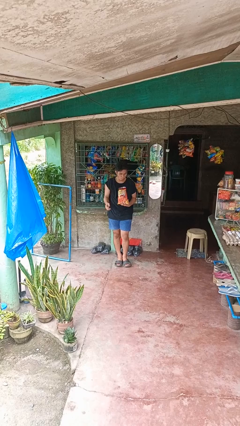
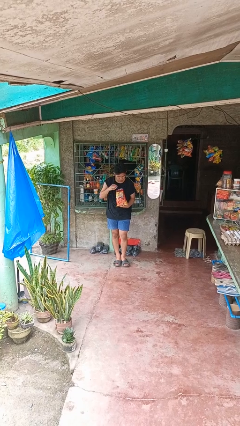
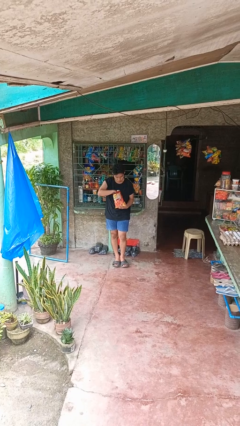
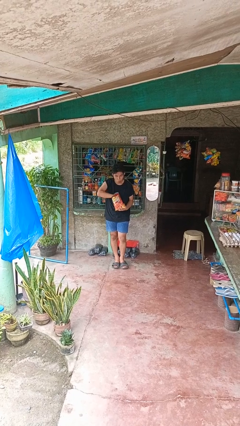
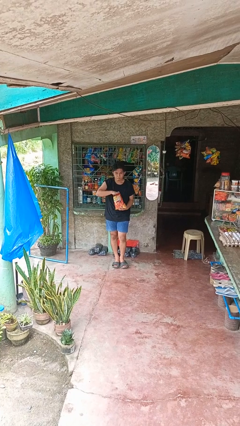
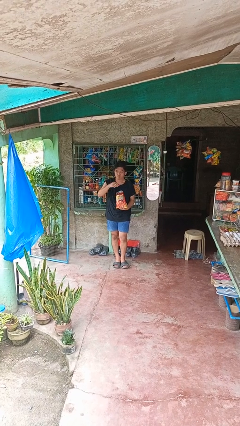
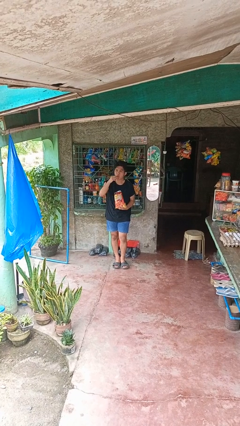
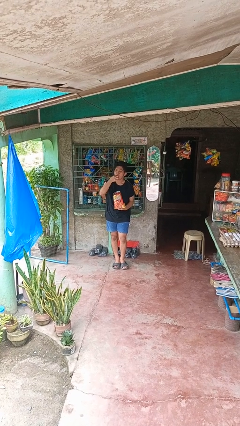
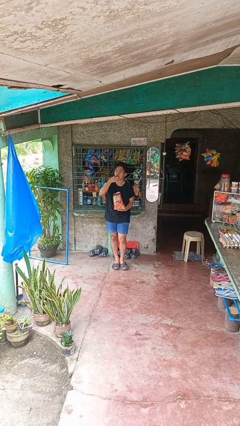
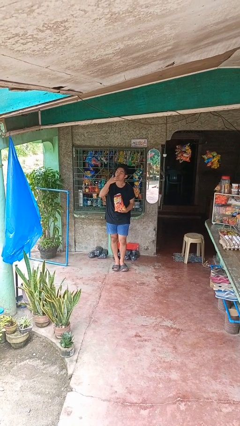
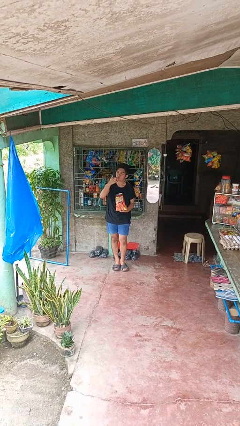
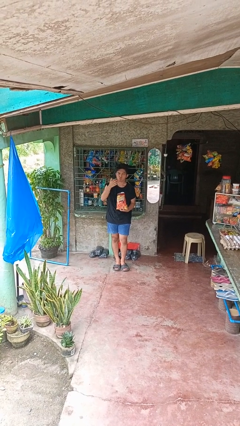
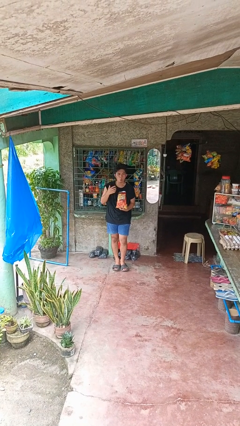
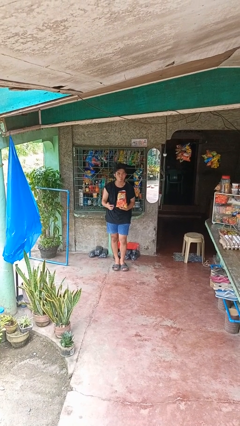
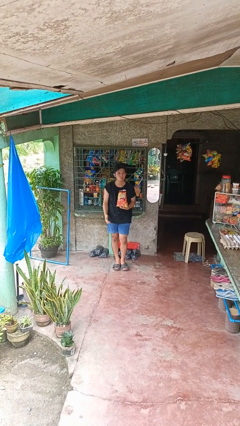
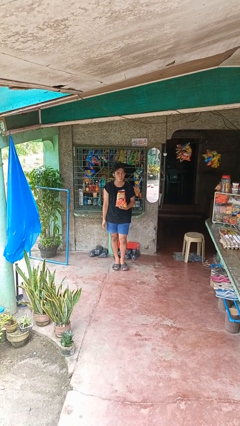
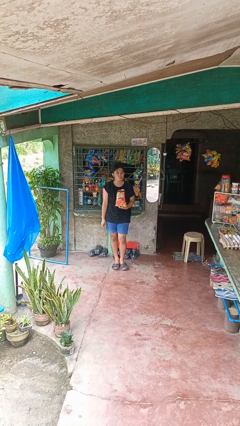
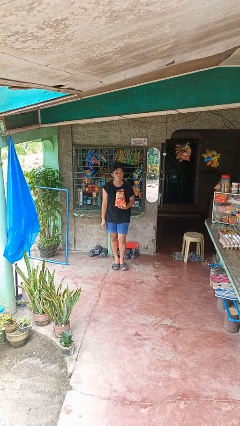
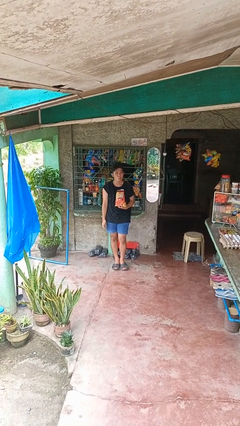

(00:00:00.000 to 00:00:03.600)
person eats snack from bag

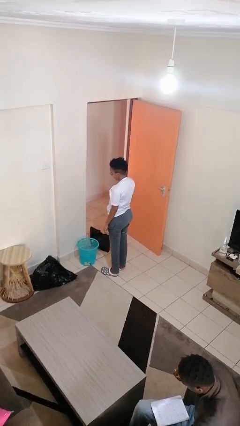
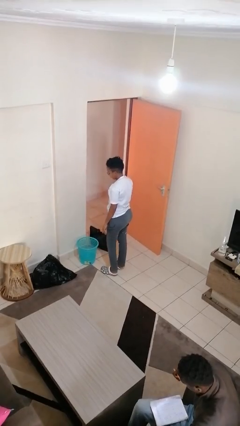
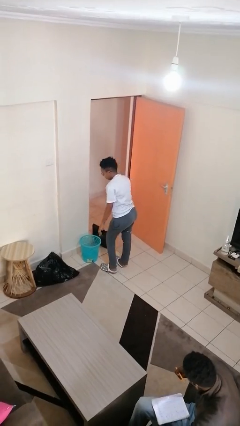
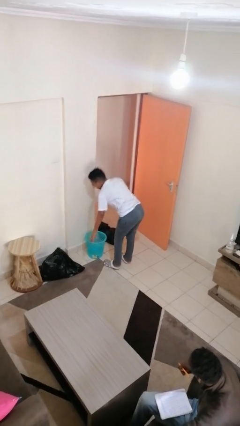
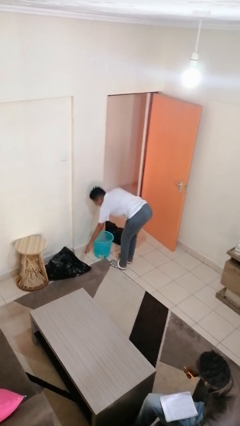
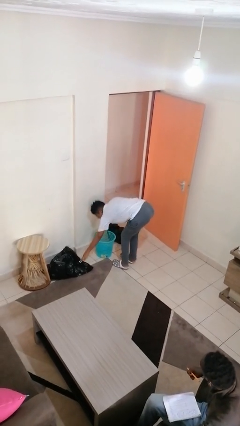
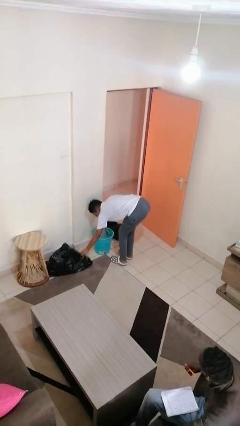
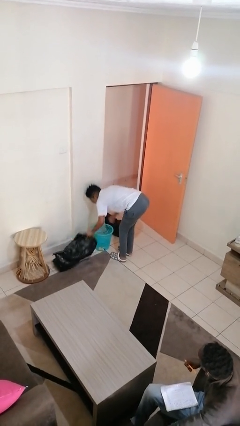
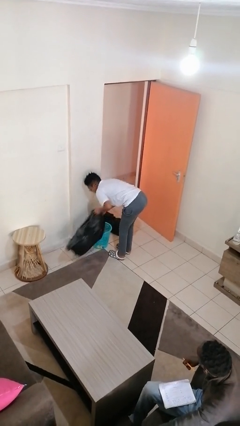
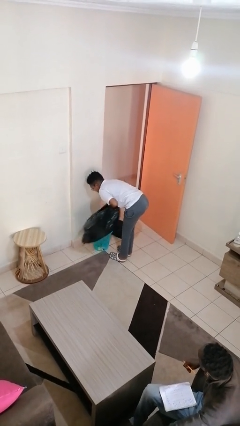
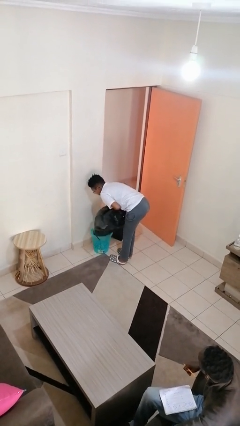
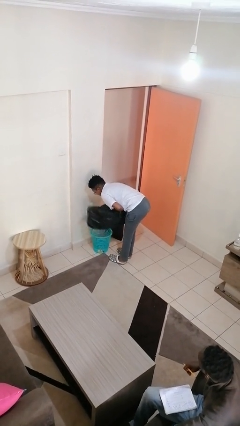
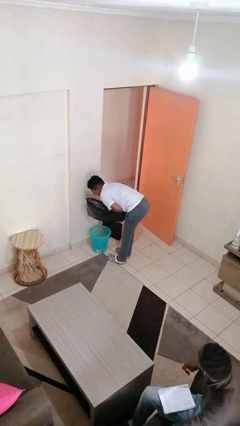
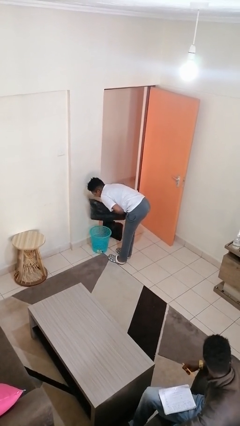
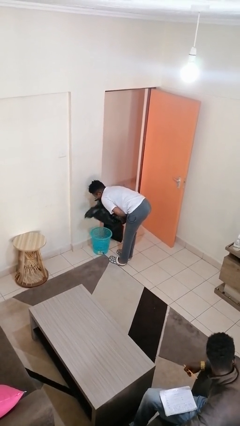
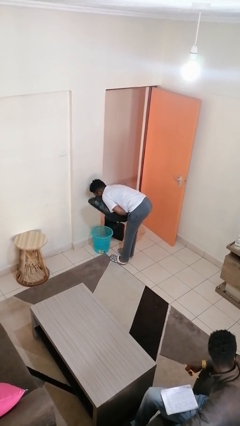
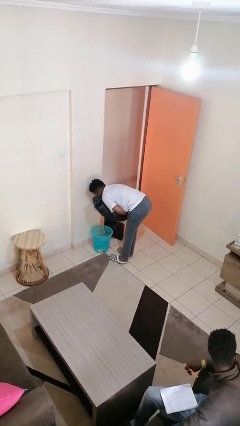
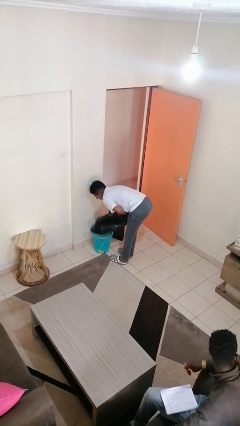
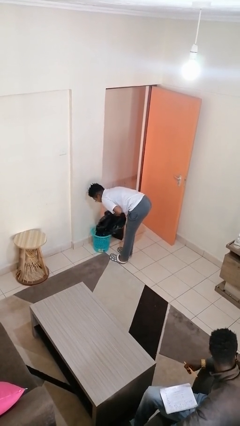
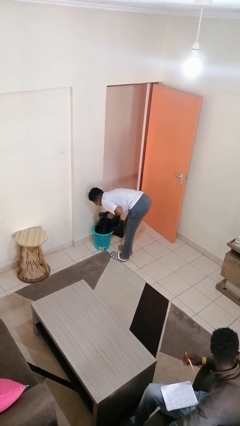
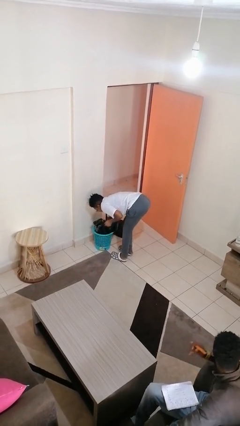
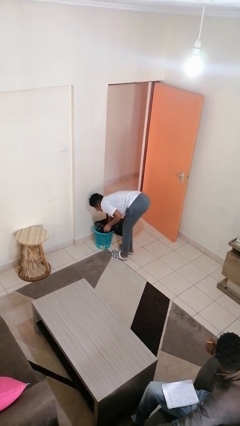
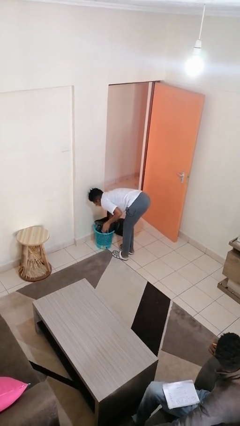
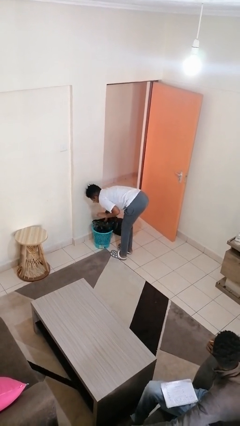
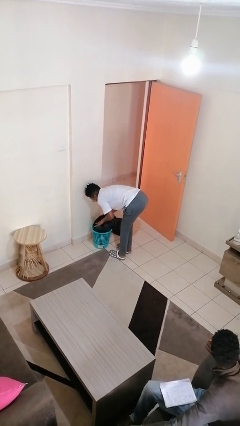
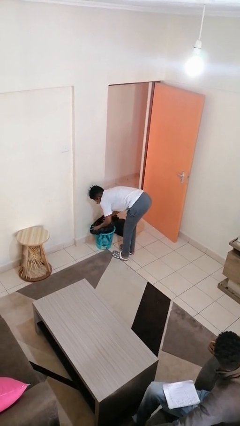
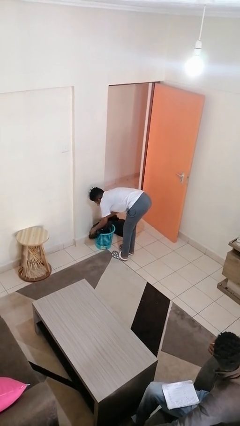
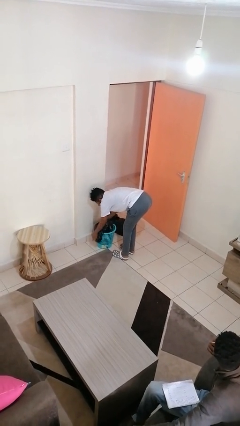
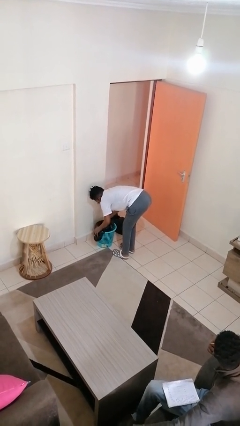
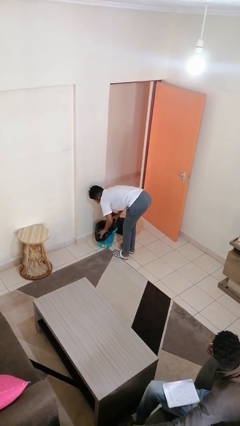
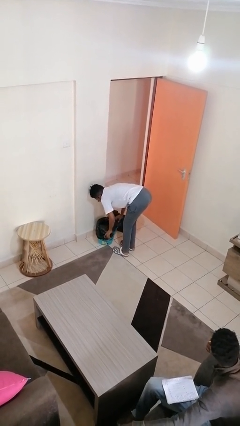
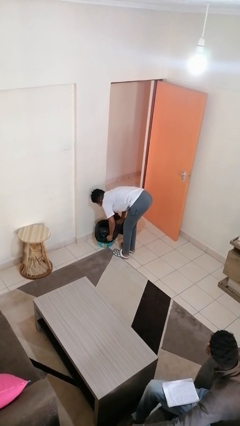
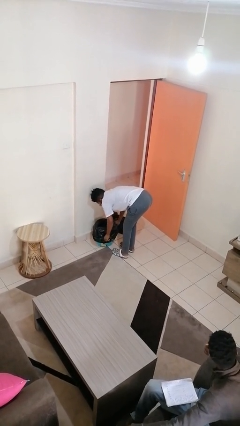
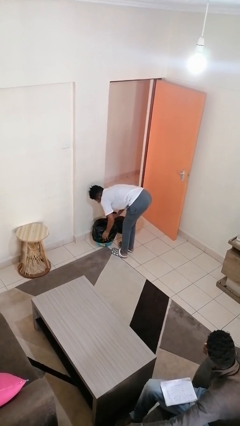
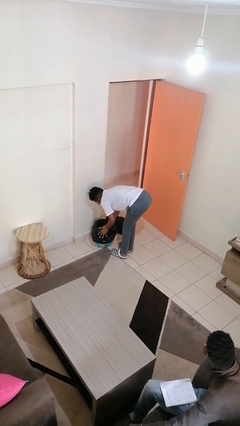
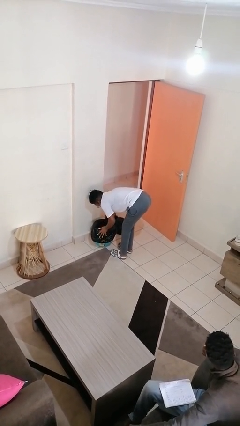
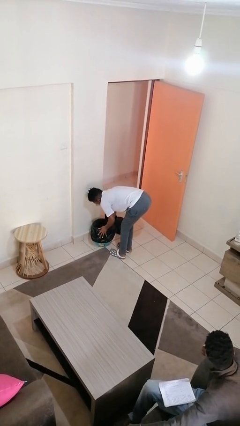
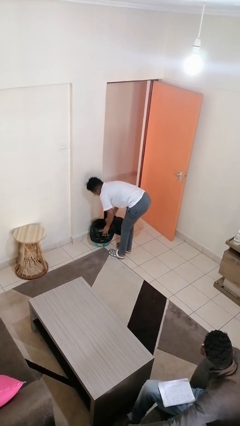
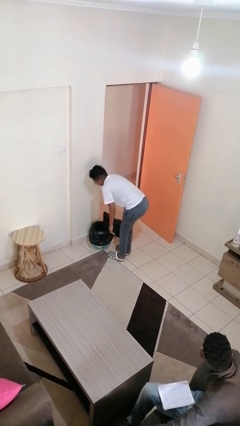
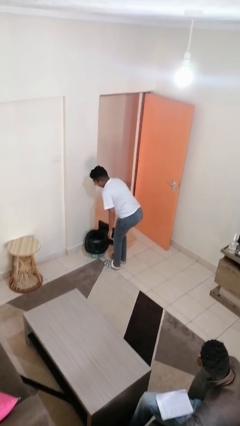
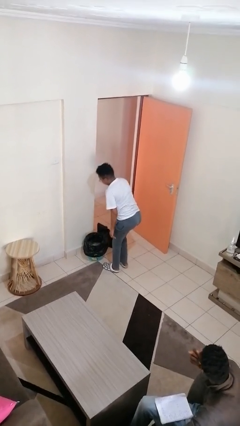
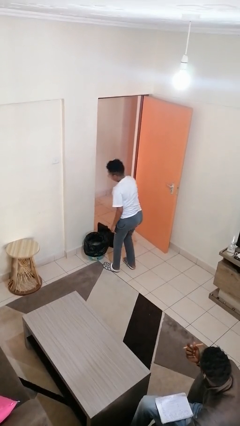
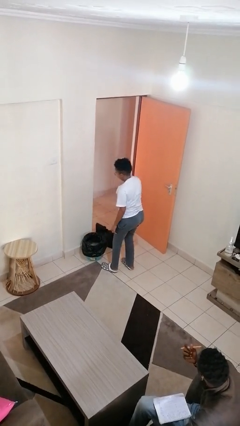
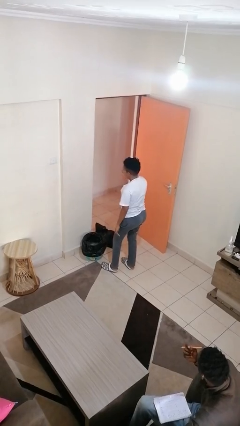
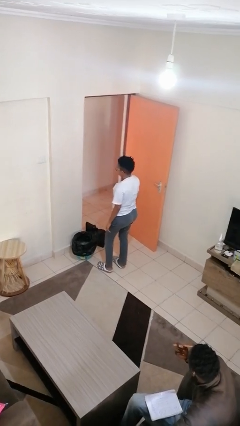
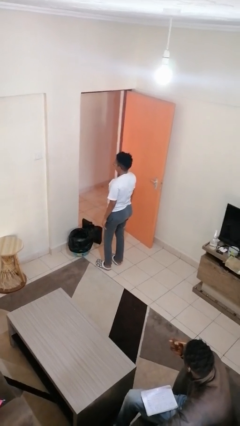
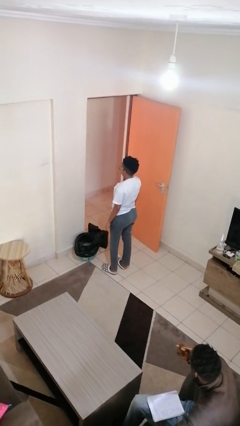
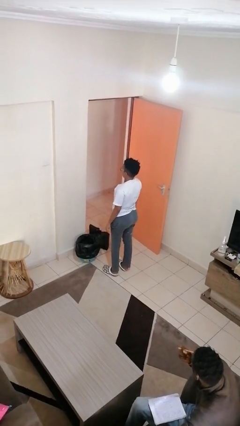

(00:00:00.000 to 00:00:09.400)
person inserts trashbag into trashcan

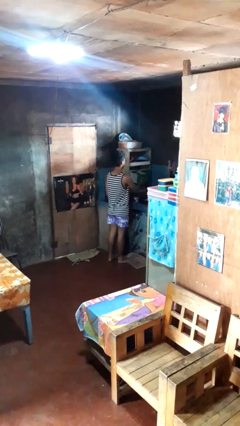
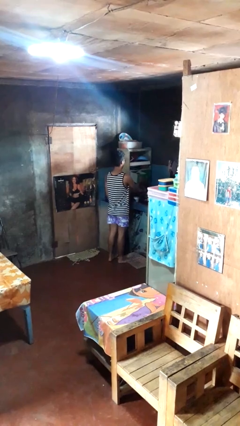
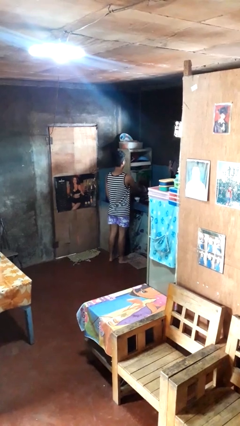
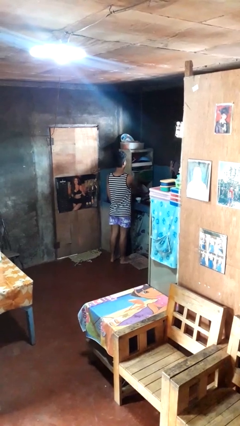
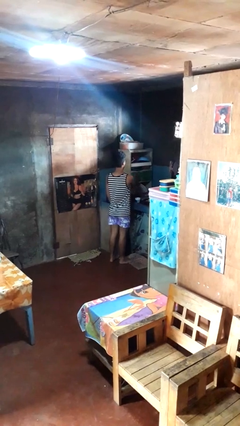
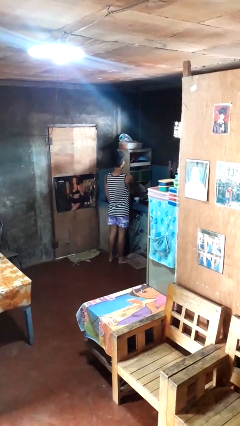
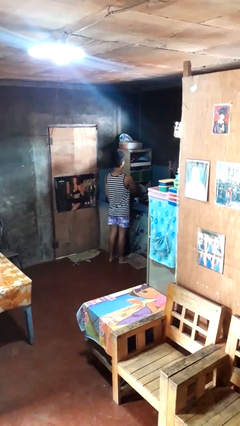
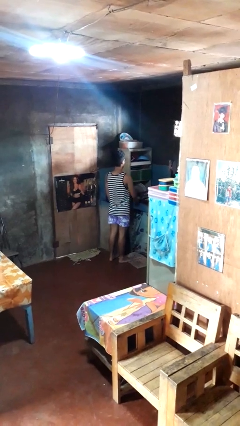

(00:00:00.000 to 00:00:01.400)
person closes kitchen drawer

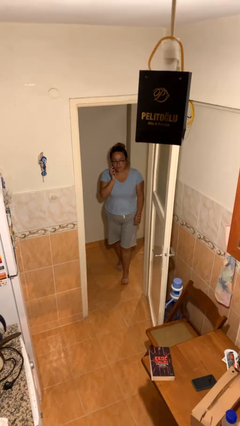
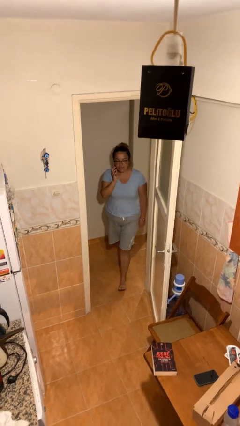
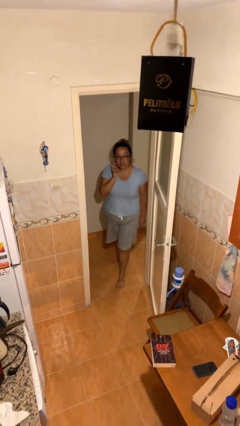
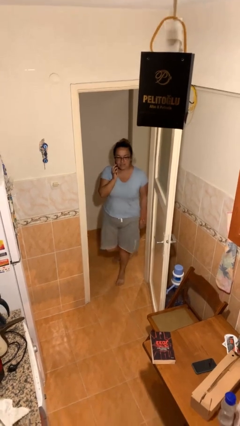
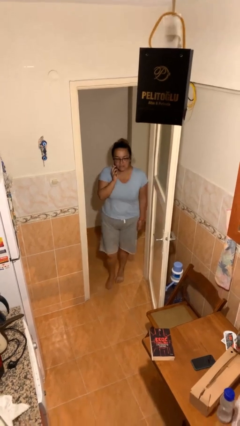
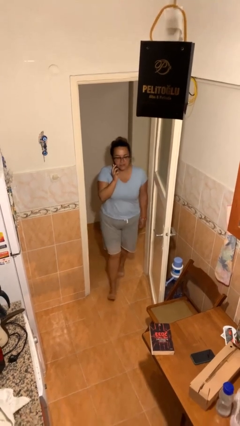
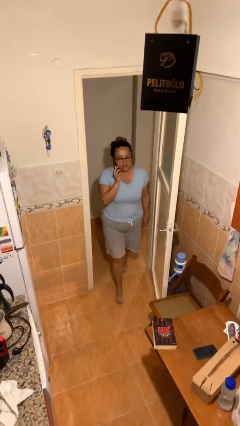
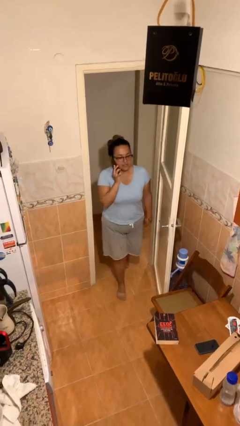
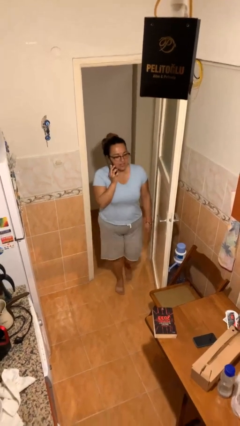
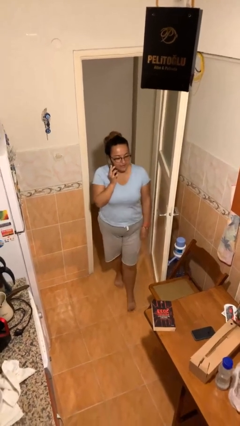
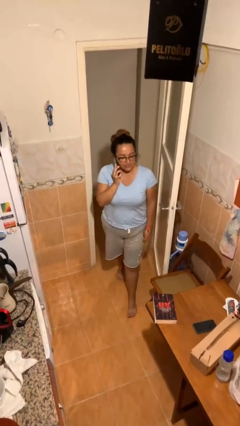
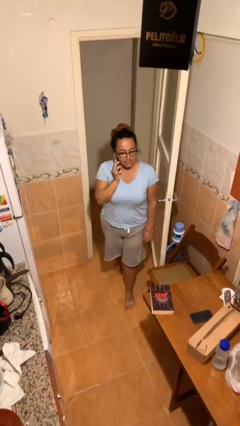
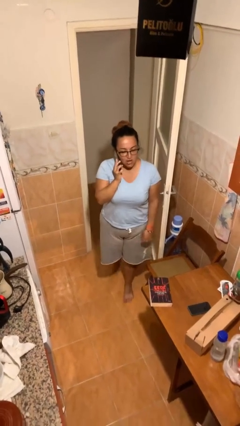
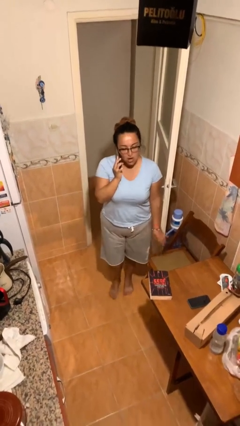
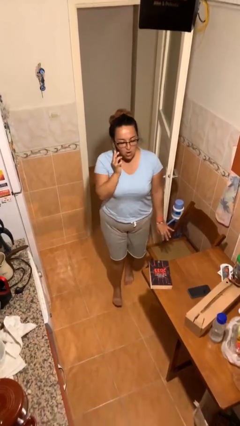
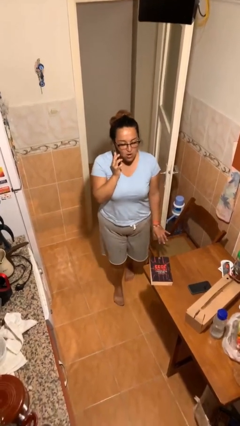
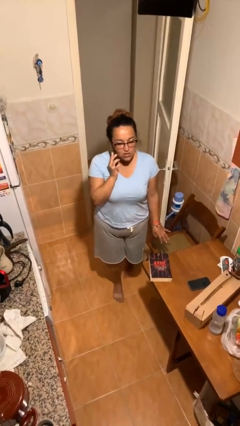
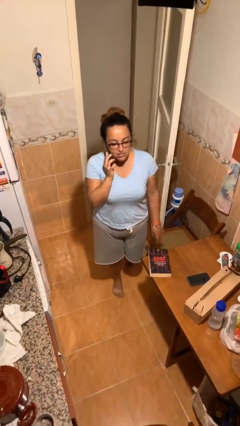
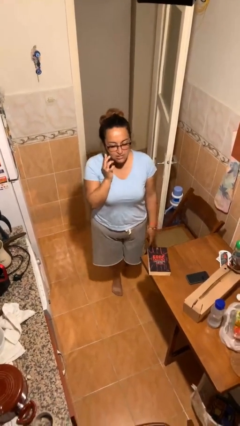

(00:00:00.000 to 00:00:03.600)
person enters scene through structure
